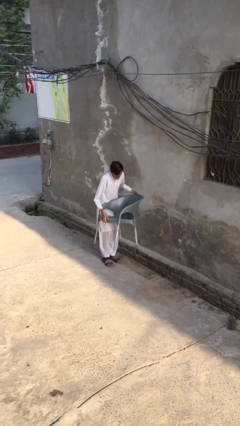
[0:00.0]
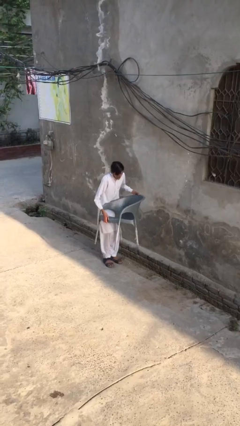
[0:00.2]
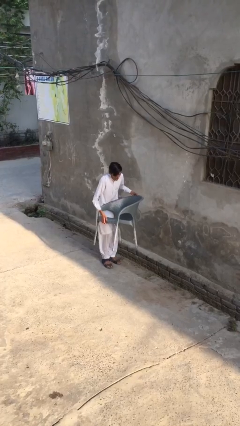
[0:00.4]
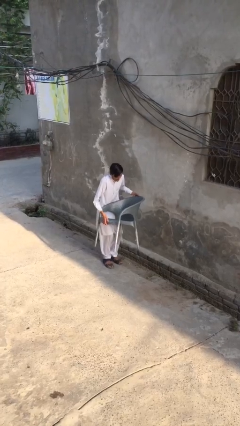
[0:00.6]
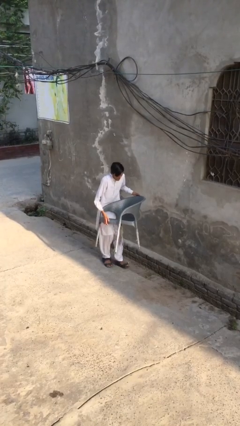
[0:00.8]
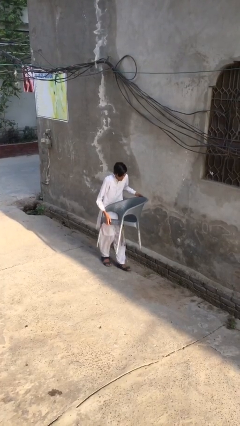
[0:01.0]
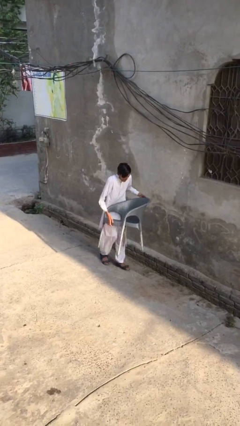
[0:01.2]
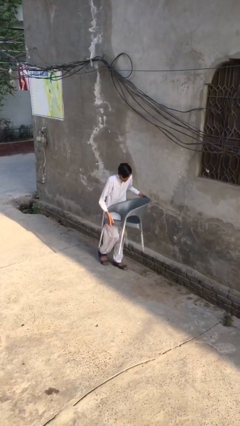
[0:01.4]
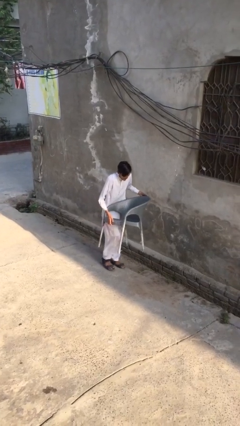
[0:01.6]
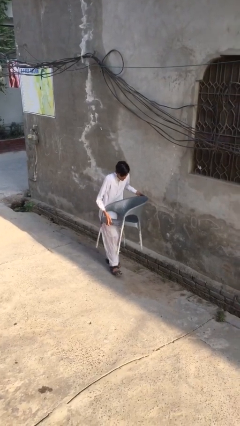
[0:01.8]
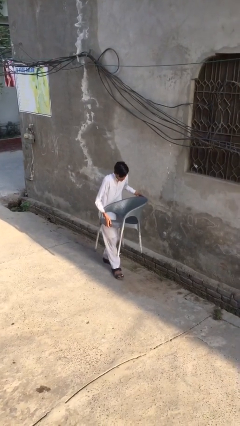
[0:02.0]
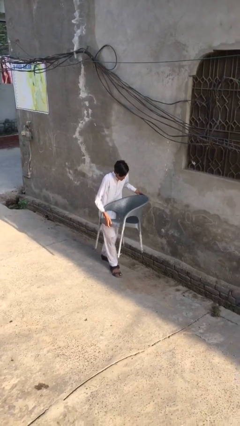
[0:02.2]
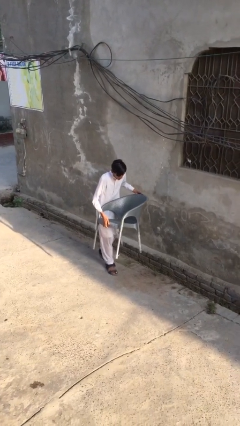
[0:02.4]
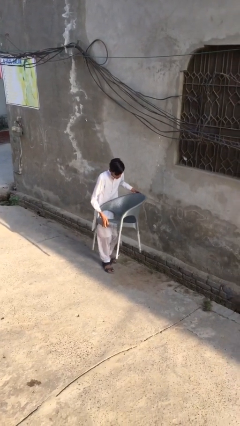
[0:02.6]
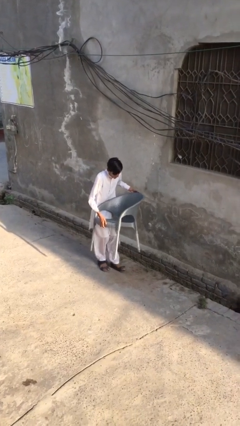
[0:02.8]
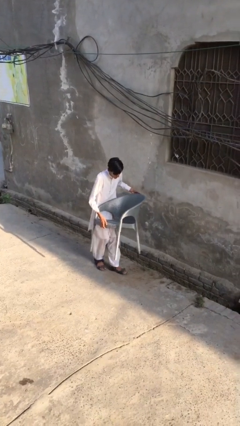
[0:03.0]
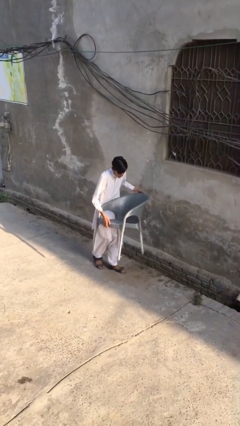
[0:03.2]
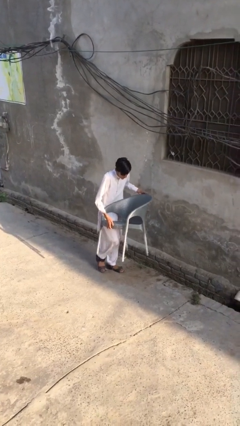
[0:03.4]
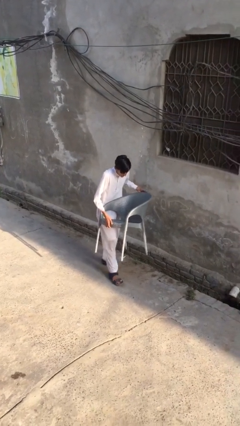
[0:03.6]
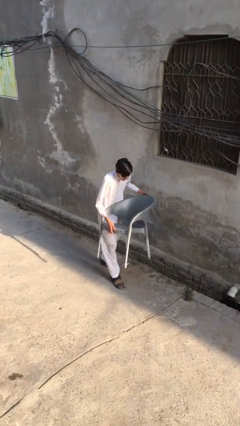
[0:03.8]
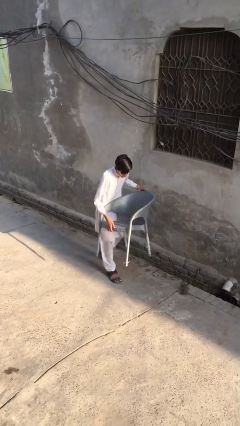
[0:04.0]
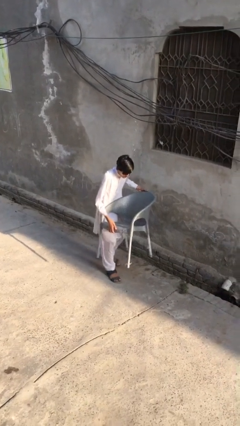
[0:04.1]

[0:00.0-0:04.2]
person carries heavy object

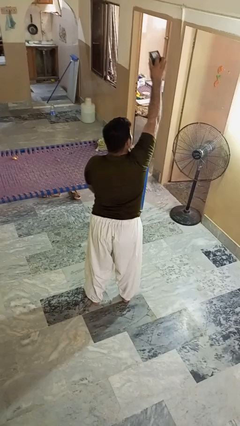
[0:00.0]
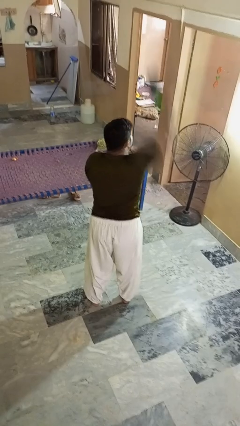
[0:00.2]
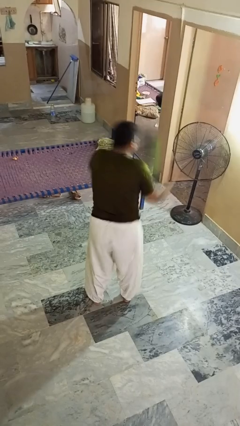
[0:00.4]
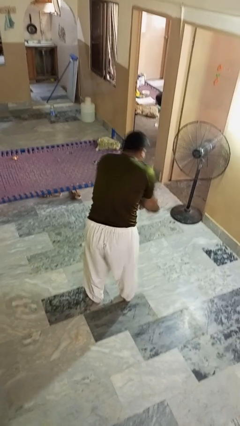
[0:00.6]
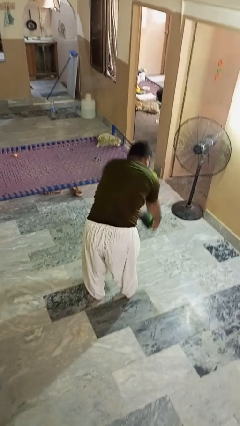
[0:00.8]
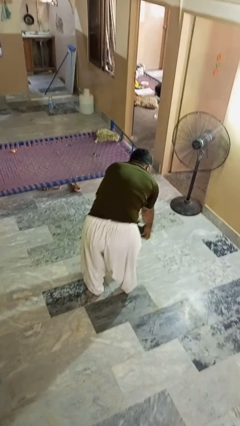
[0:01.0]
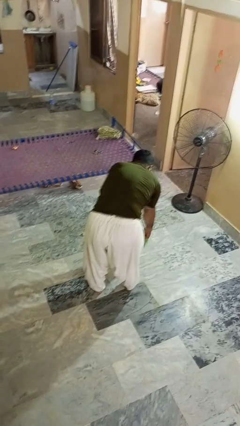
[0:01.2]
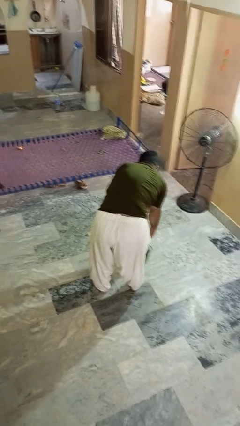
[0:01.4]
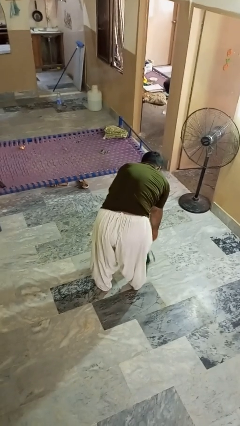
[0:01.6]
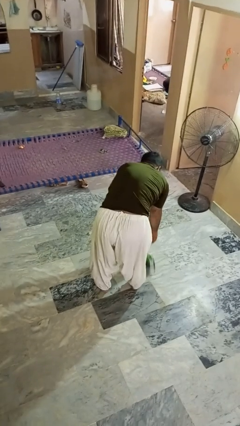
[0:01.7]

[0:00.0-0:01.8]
person catches dropped object

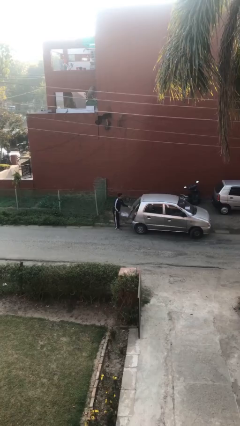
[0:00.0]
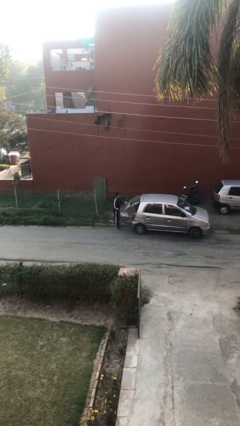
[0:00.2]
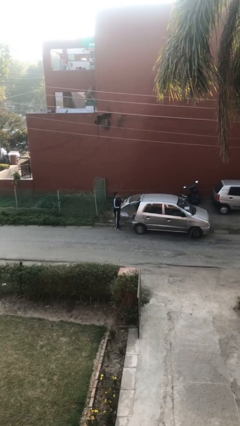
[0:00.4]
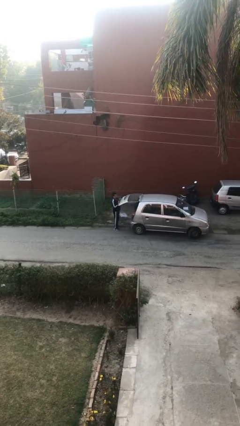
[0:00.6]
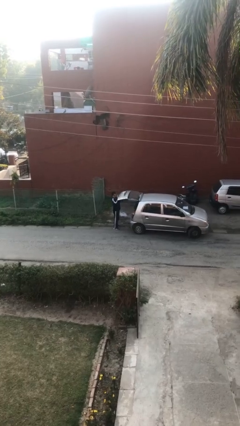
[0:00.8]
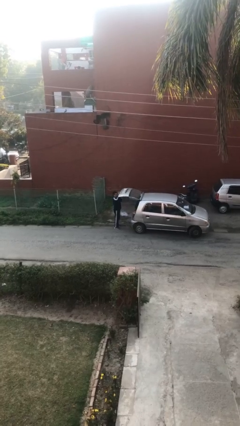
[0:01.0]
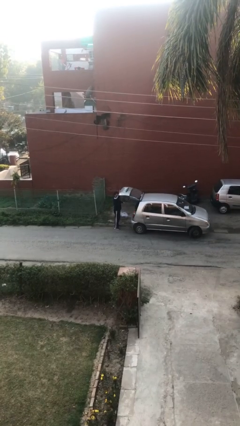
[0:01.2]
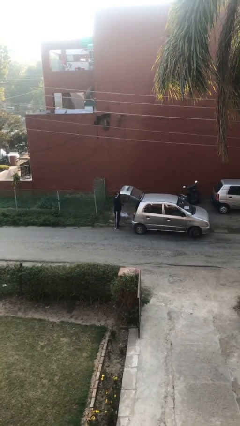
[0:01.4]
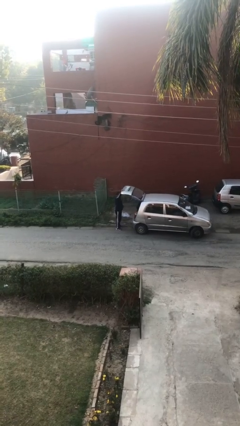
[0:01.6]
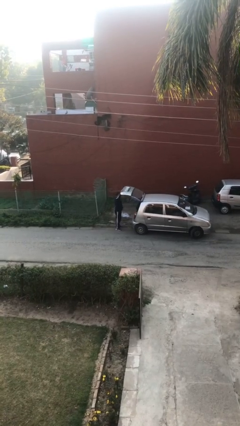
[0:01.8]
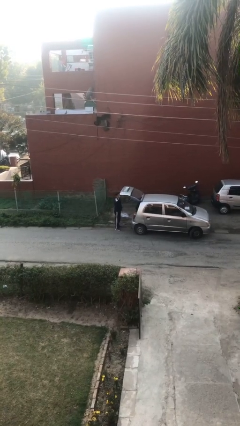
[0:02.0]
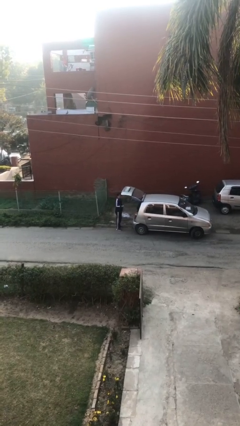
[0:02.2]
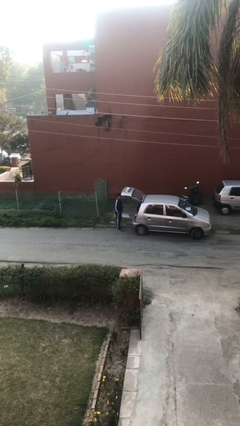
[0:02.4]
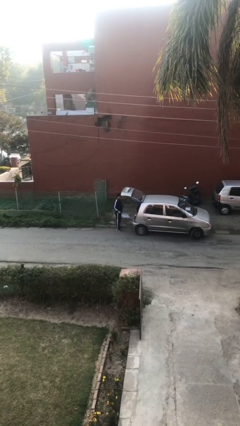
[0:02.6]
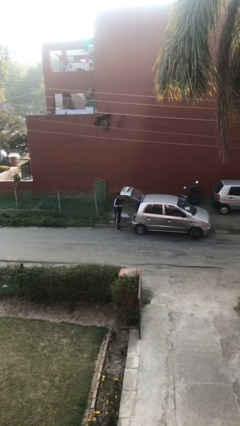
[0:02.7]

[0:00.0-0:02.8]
person opens car trunk

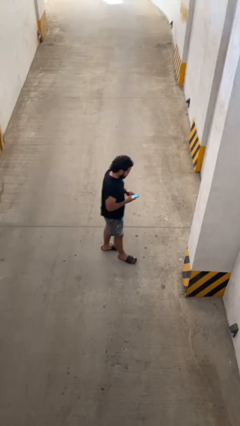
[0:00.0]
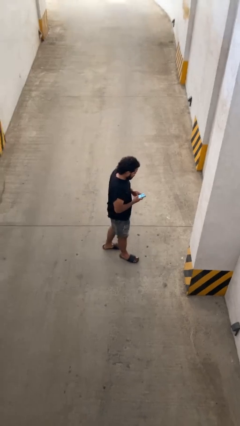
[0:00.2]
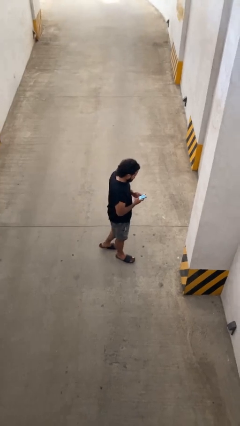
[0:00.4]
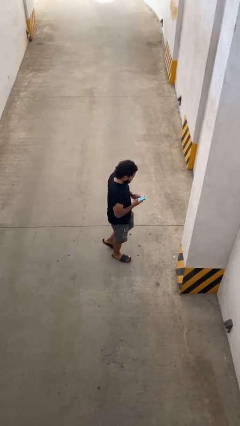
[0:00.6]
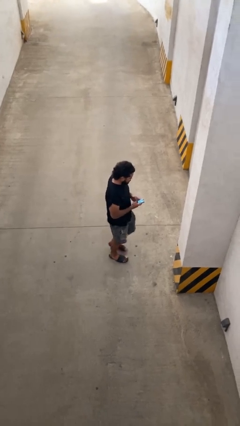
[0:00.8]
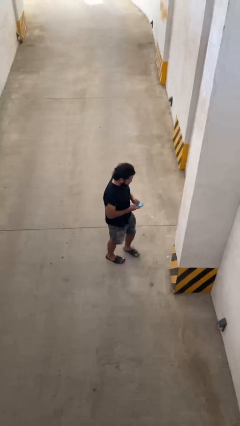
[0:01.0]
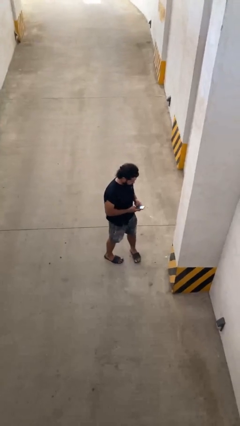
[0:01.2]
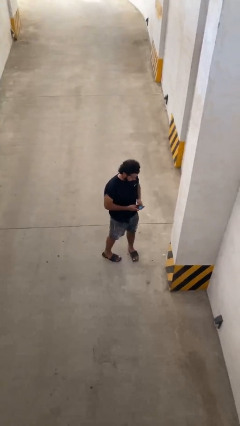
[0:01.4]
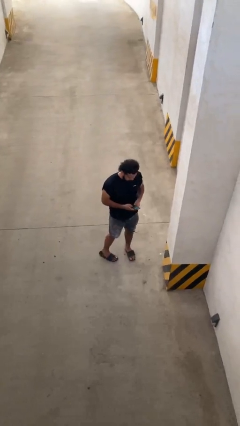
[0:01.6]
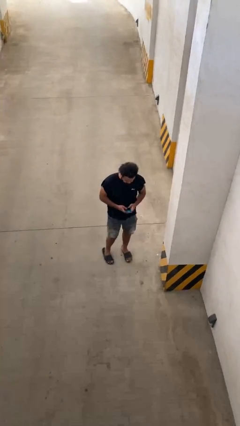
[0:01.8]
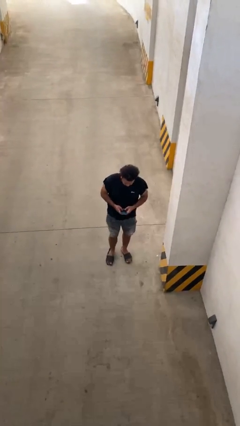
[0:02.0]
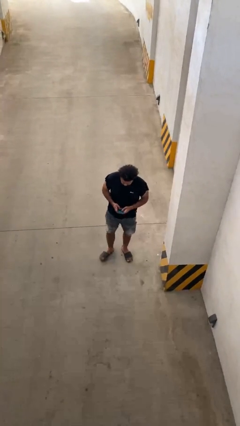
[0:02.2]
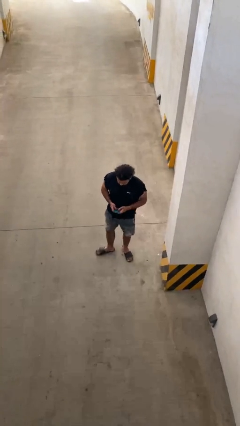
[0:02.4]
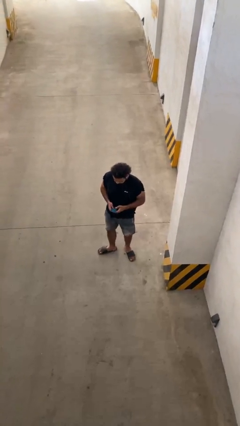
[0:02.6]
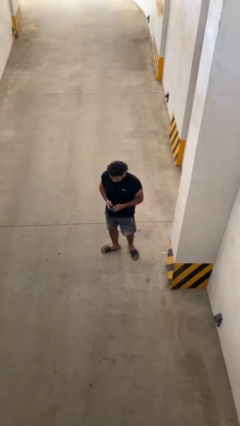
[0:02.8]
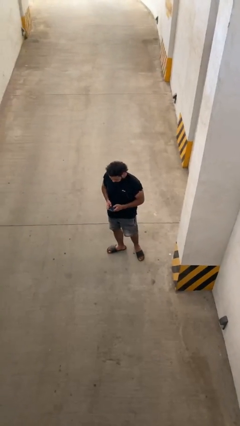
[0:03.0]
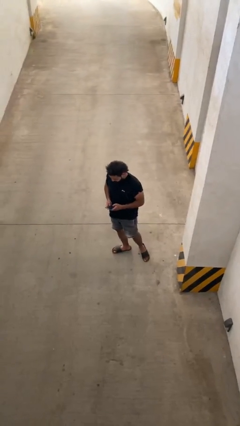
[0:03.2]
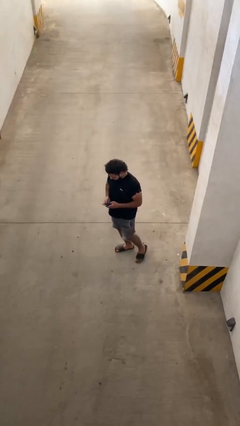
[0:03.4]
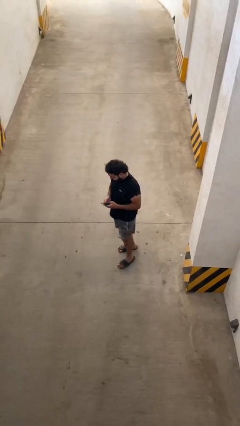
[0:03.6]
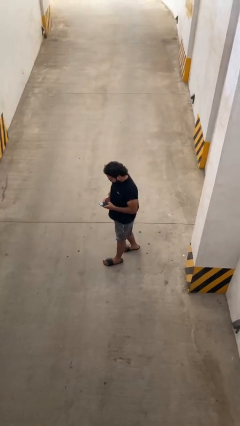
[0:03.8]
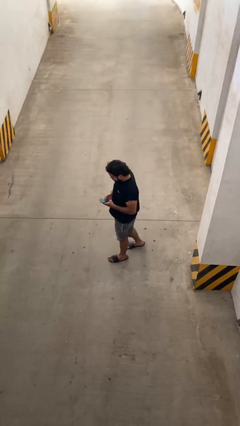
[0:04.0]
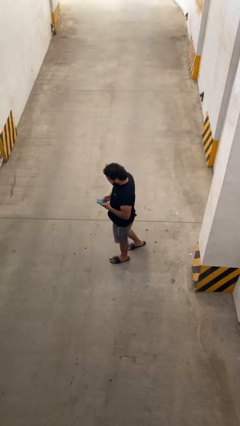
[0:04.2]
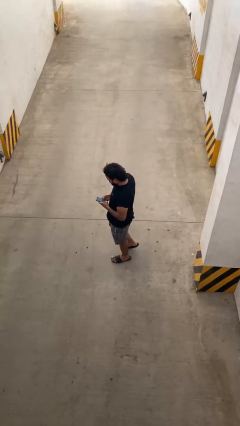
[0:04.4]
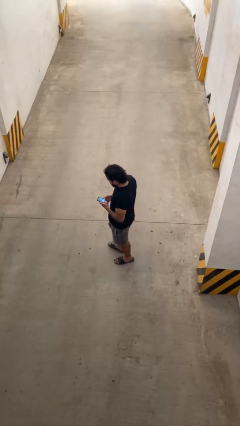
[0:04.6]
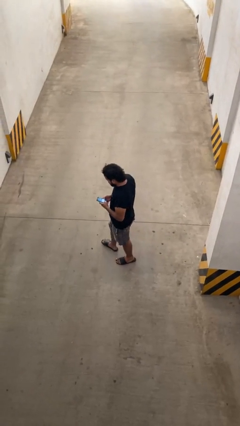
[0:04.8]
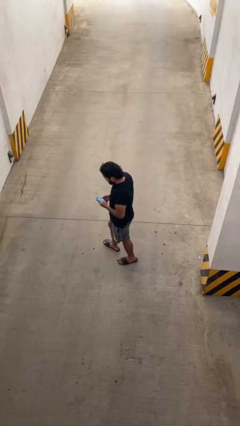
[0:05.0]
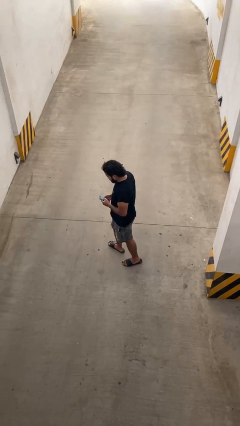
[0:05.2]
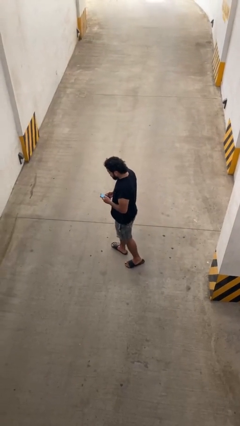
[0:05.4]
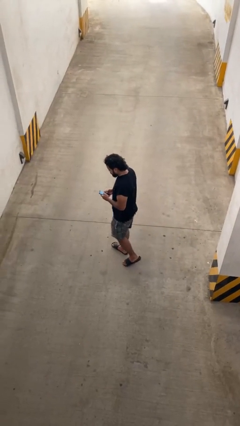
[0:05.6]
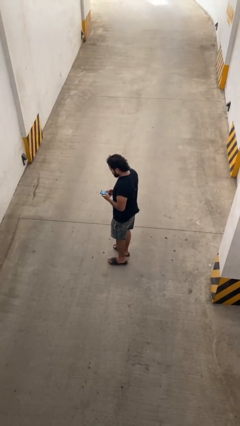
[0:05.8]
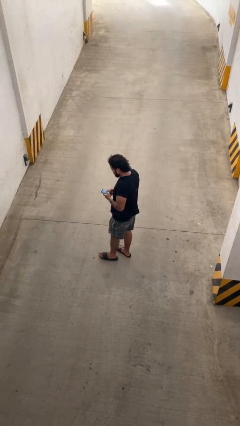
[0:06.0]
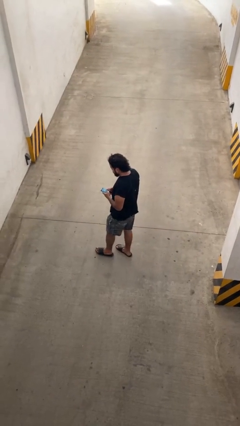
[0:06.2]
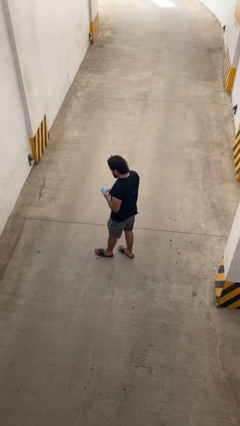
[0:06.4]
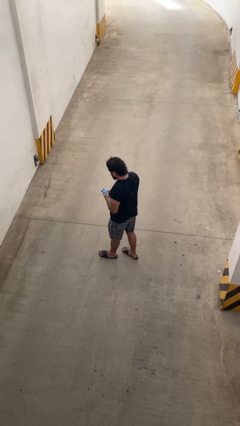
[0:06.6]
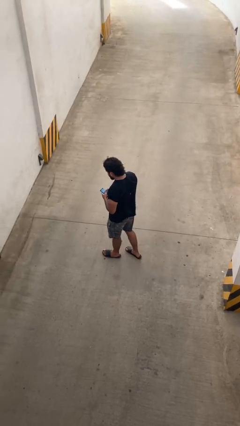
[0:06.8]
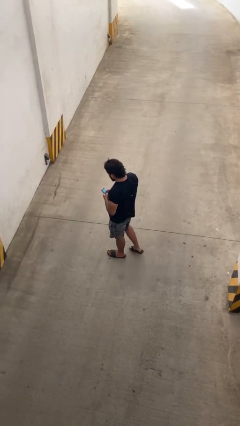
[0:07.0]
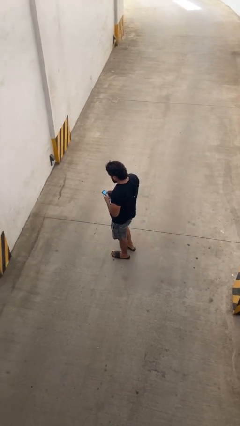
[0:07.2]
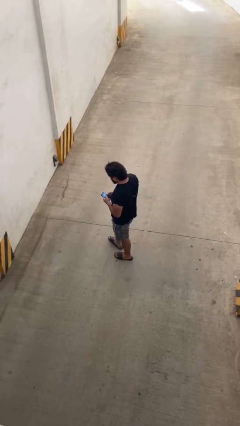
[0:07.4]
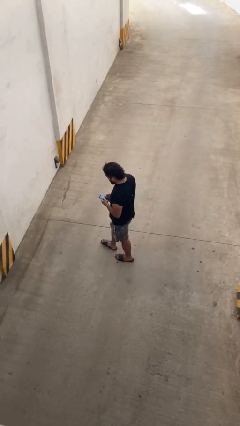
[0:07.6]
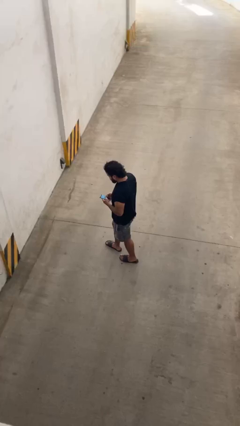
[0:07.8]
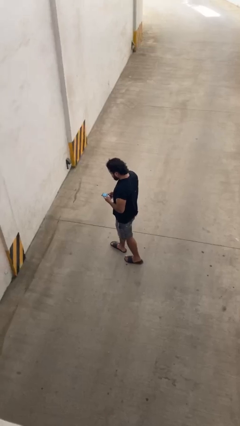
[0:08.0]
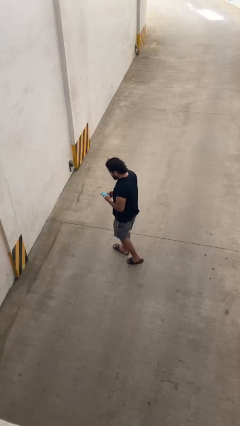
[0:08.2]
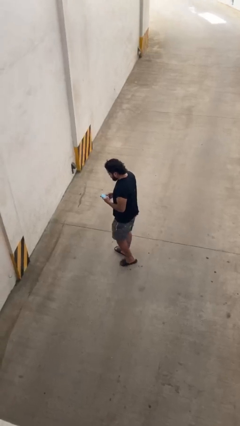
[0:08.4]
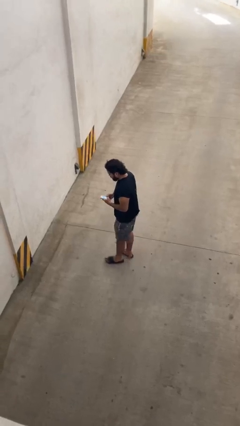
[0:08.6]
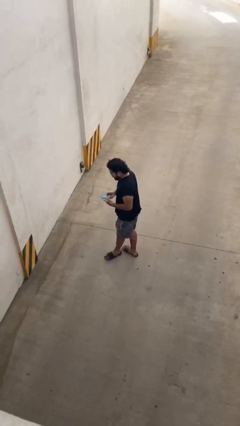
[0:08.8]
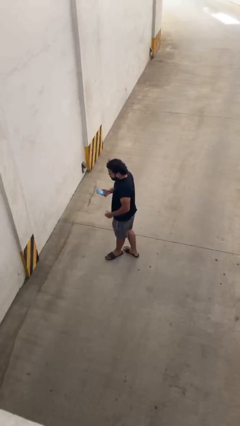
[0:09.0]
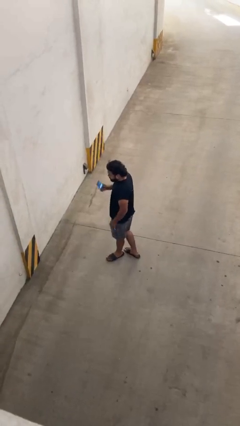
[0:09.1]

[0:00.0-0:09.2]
person texts on phone

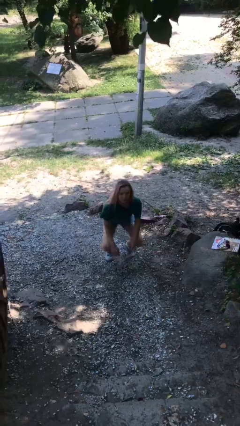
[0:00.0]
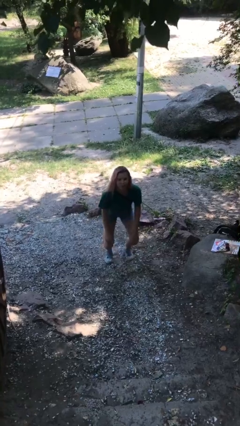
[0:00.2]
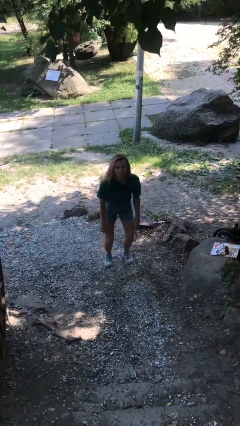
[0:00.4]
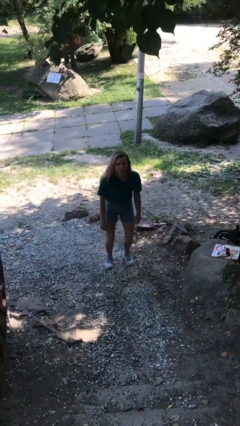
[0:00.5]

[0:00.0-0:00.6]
person stands up
